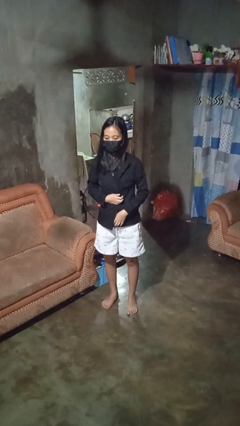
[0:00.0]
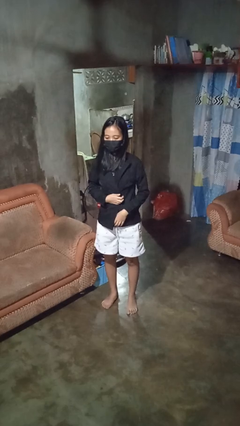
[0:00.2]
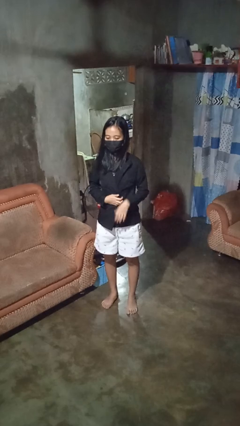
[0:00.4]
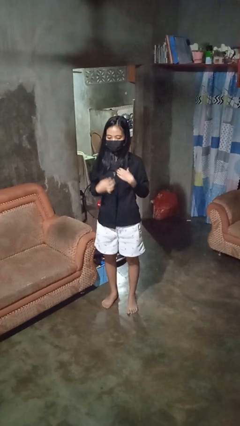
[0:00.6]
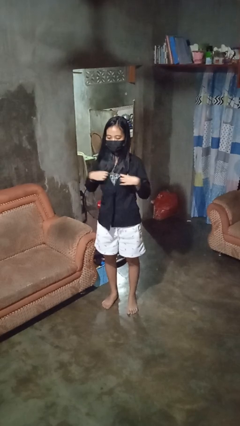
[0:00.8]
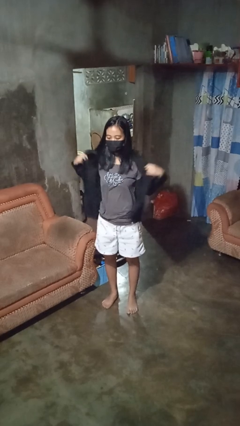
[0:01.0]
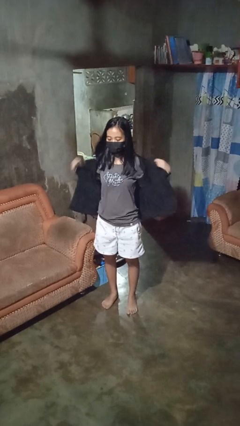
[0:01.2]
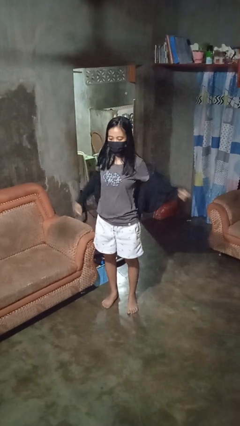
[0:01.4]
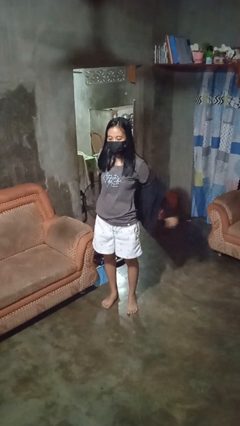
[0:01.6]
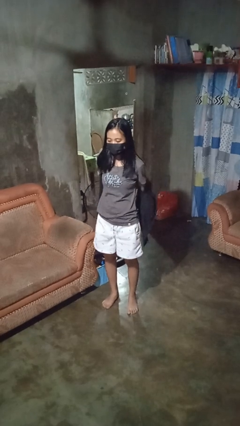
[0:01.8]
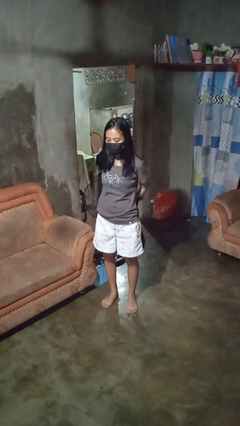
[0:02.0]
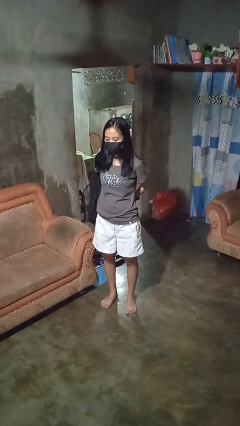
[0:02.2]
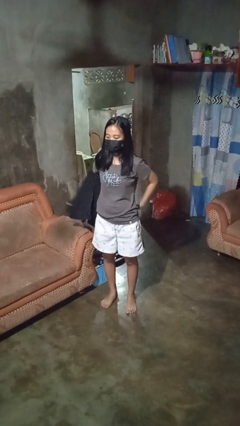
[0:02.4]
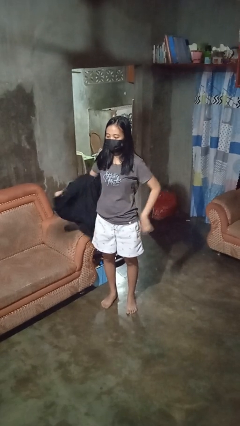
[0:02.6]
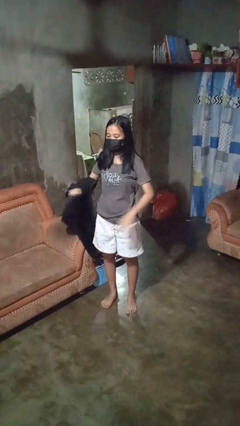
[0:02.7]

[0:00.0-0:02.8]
person takes off shirt

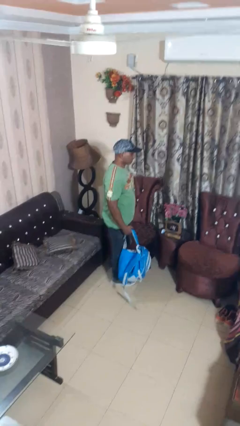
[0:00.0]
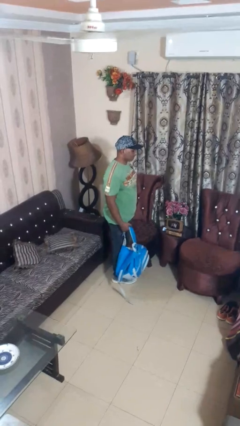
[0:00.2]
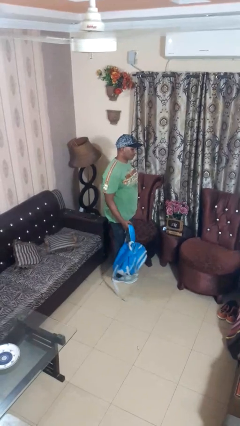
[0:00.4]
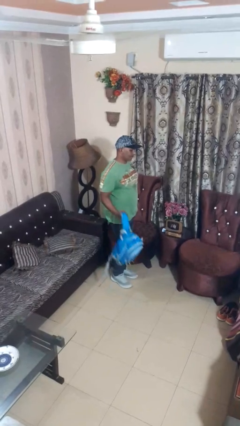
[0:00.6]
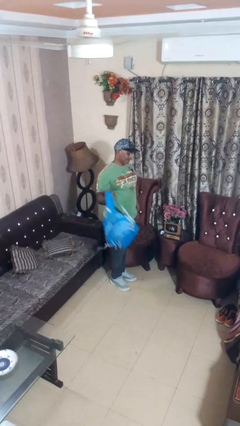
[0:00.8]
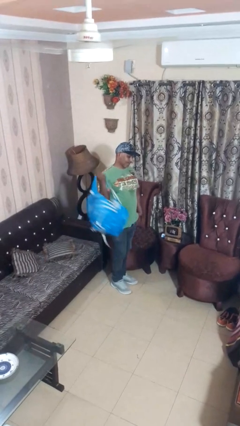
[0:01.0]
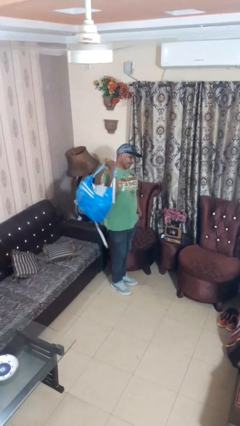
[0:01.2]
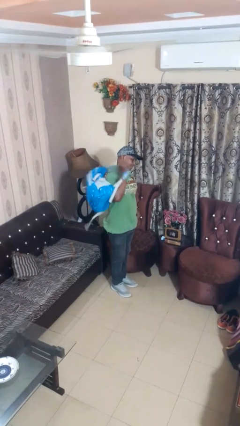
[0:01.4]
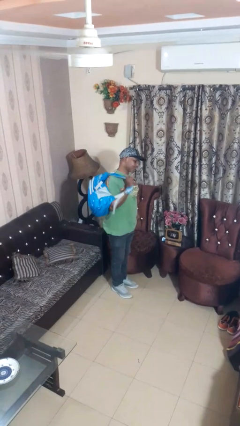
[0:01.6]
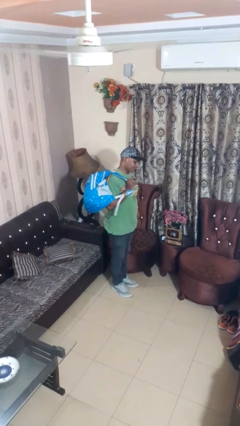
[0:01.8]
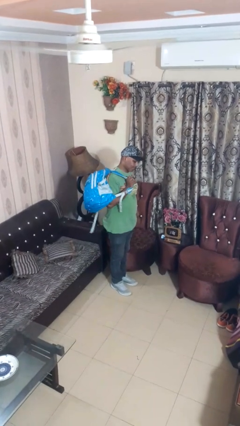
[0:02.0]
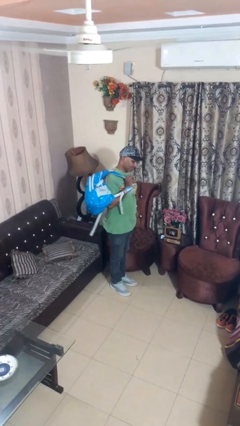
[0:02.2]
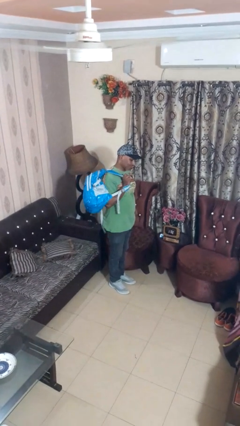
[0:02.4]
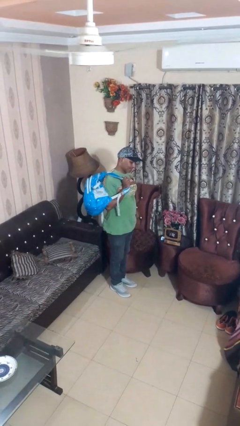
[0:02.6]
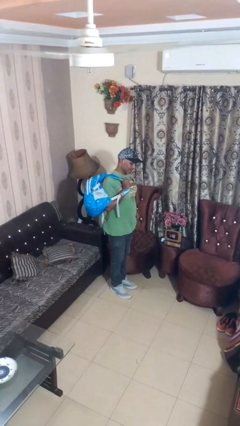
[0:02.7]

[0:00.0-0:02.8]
person puts on backpack

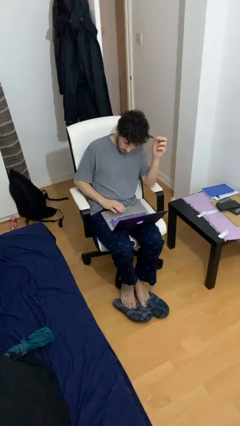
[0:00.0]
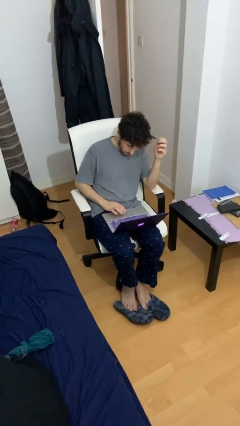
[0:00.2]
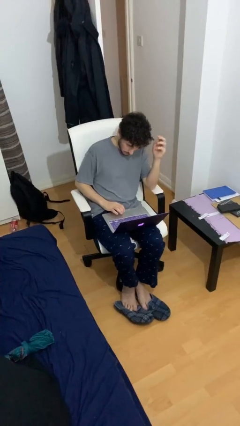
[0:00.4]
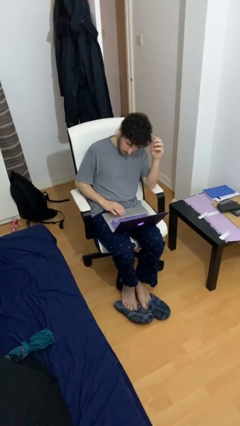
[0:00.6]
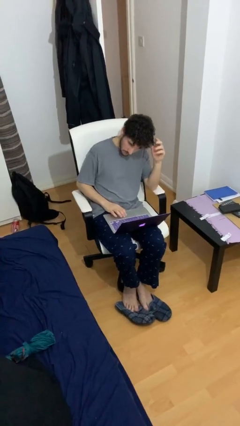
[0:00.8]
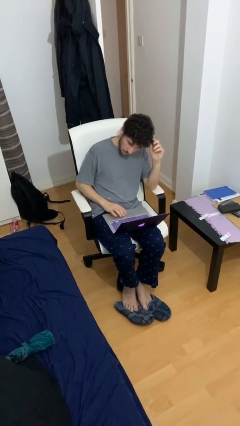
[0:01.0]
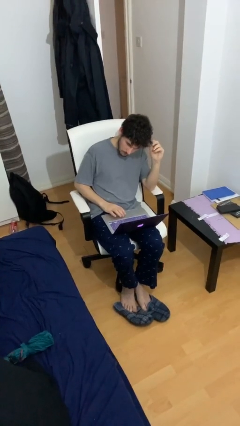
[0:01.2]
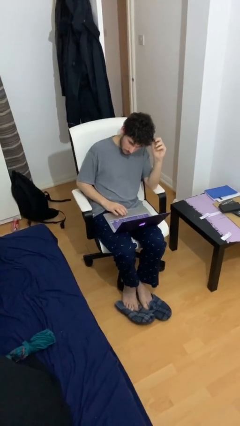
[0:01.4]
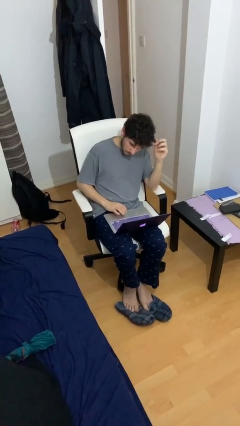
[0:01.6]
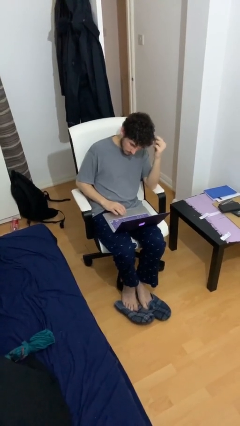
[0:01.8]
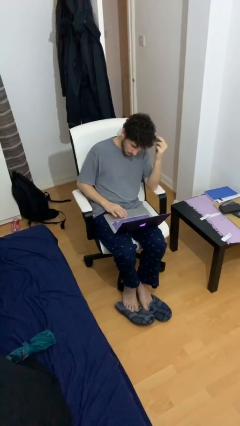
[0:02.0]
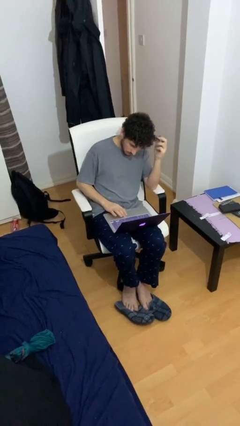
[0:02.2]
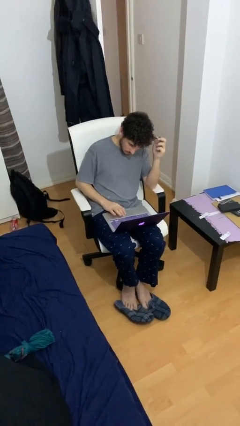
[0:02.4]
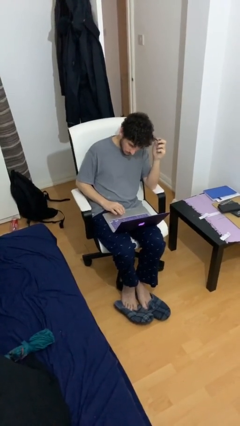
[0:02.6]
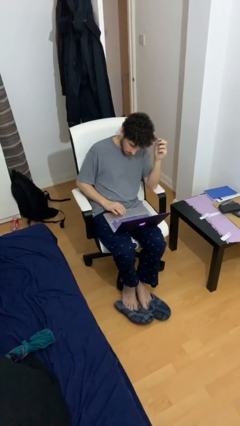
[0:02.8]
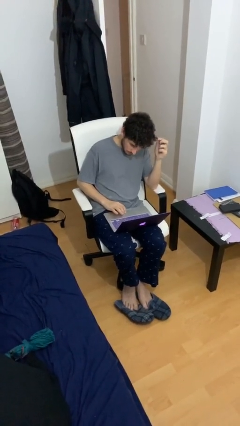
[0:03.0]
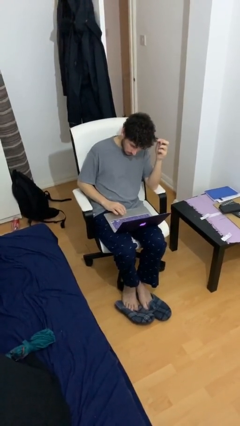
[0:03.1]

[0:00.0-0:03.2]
person interacts with laptop

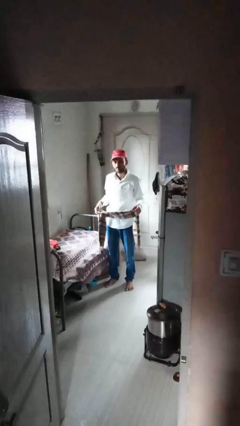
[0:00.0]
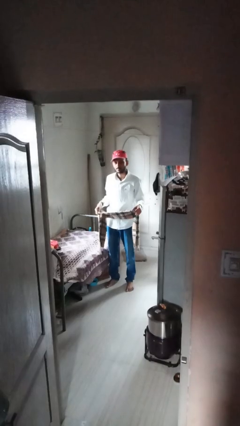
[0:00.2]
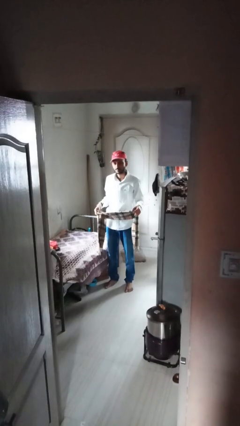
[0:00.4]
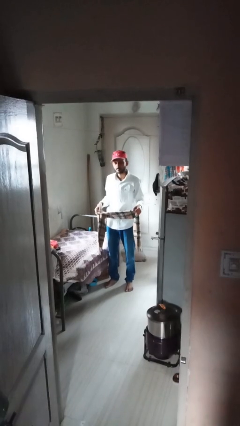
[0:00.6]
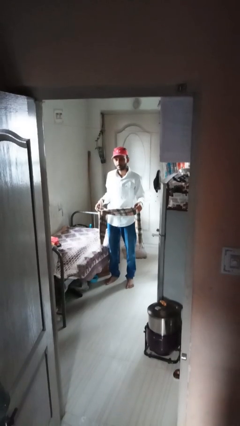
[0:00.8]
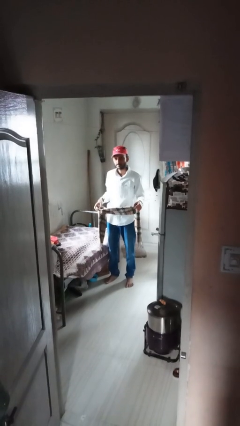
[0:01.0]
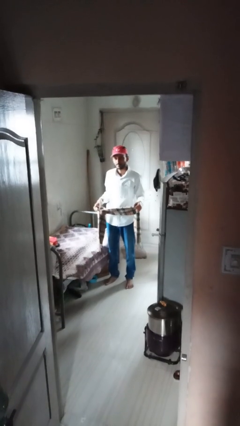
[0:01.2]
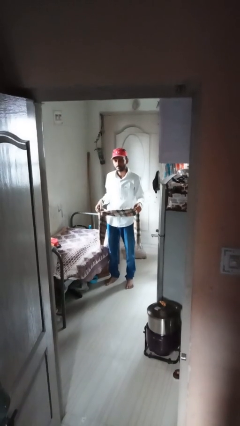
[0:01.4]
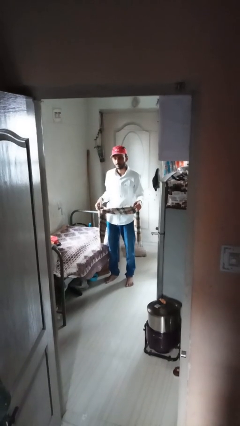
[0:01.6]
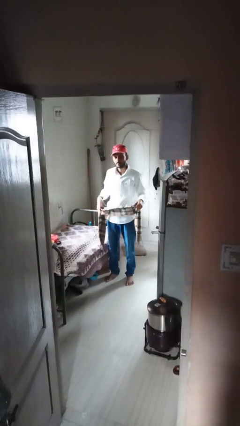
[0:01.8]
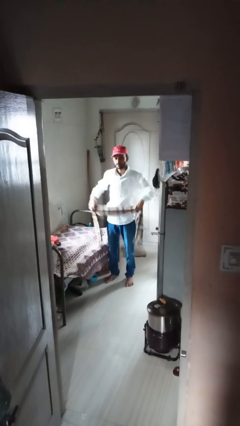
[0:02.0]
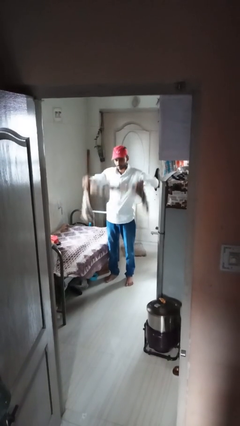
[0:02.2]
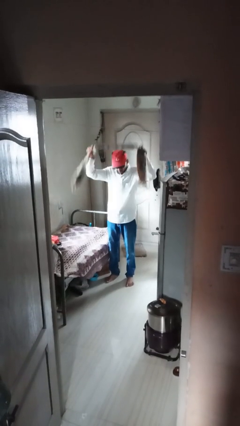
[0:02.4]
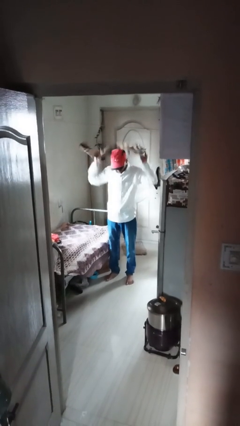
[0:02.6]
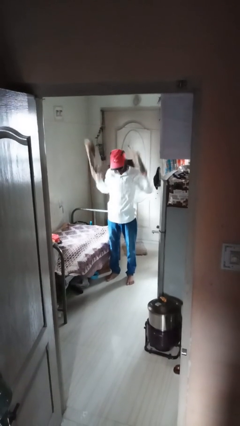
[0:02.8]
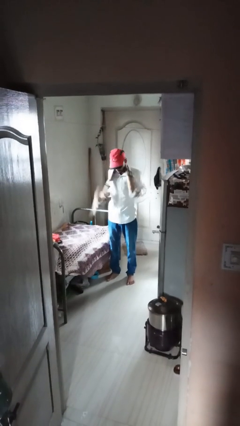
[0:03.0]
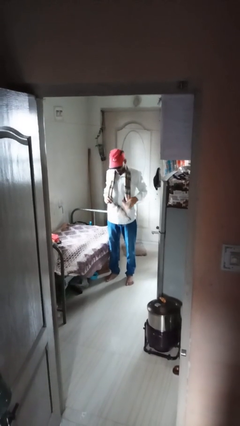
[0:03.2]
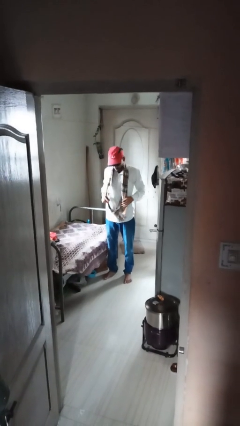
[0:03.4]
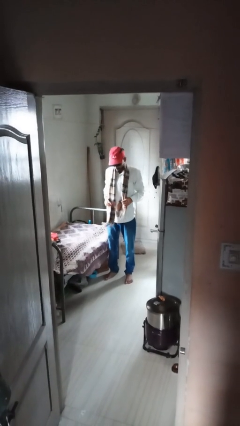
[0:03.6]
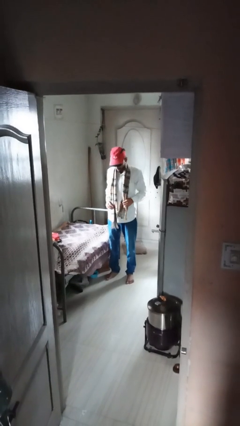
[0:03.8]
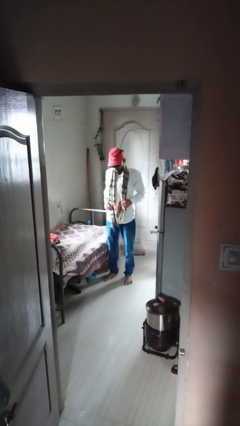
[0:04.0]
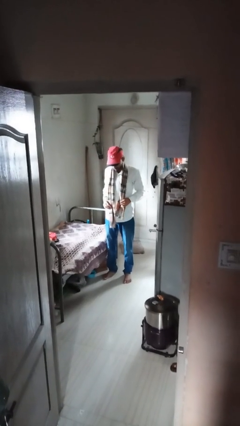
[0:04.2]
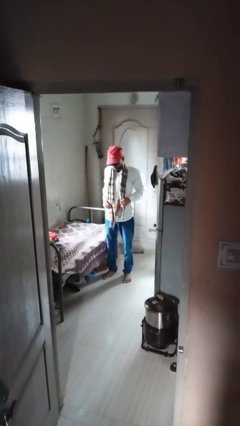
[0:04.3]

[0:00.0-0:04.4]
person puts on scarf

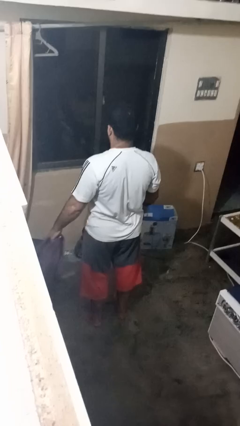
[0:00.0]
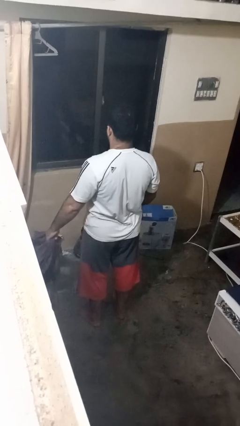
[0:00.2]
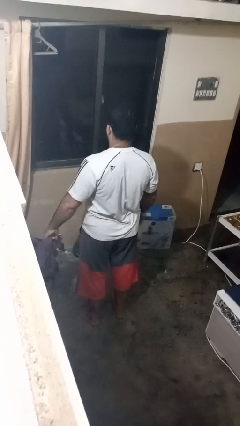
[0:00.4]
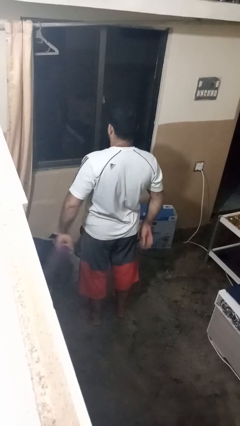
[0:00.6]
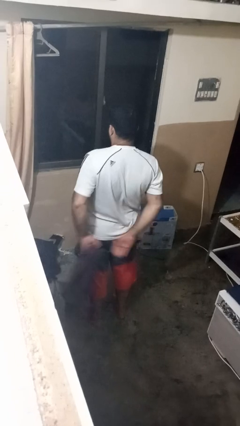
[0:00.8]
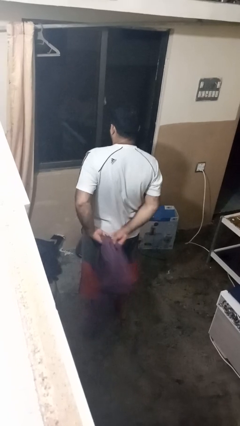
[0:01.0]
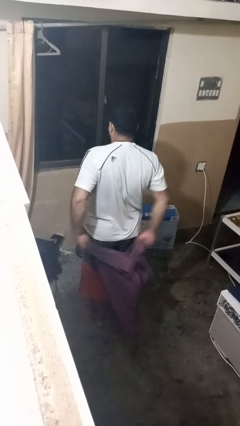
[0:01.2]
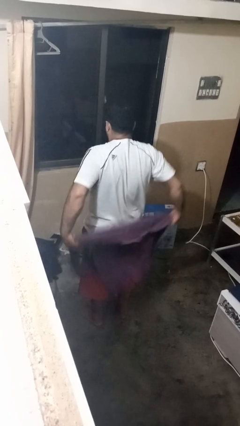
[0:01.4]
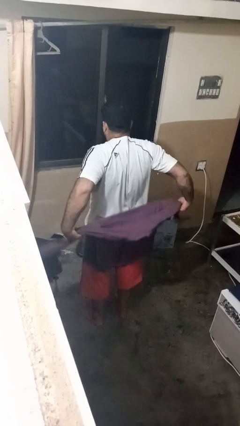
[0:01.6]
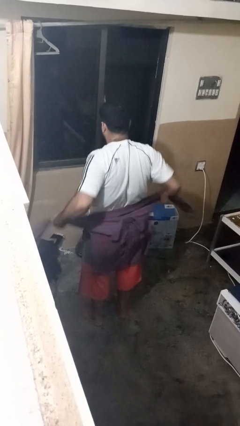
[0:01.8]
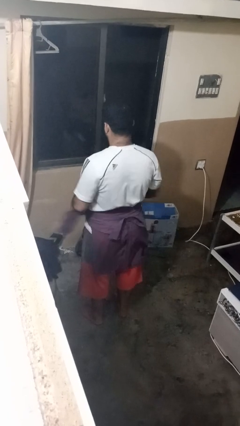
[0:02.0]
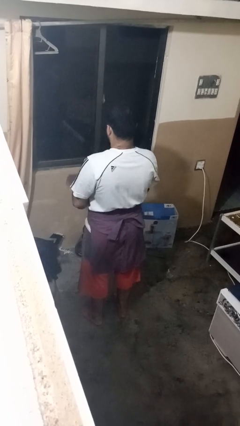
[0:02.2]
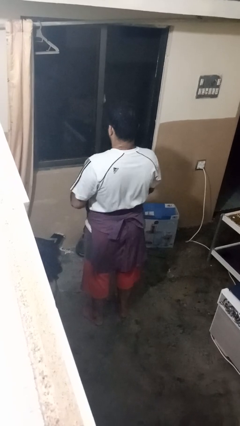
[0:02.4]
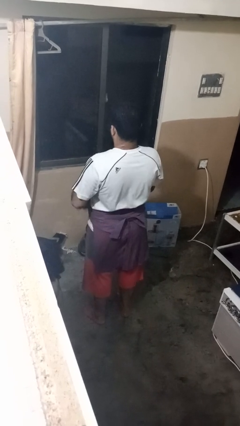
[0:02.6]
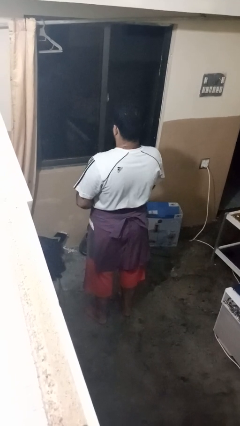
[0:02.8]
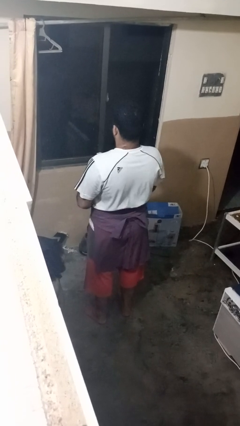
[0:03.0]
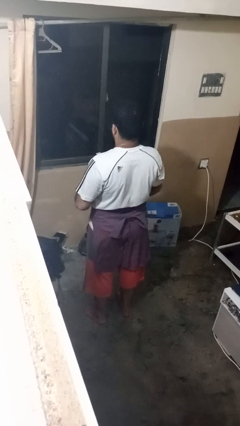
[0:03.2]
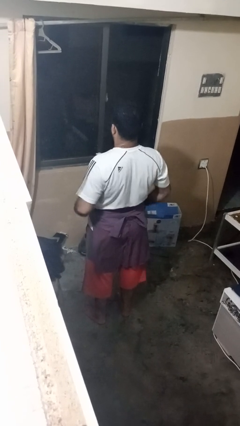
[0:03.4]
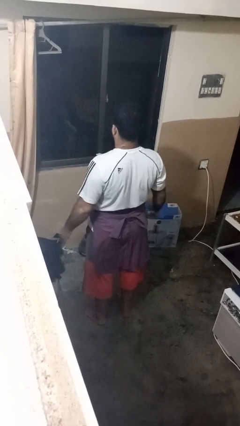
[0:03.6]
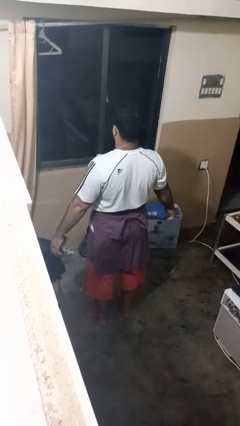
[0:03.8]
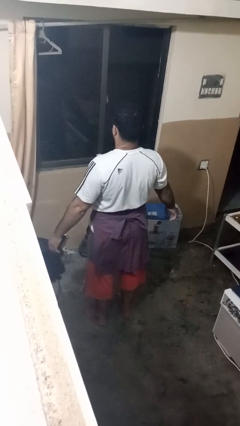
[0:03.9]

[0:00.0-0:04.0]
person ties jacket around waist

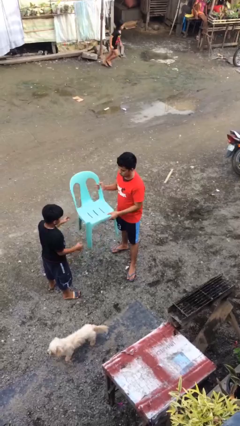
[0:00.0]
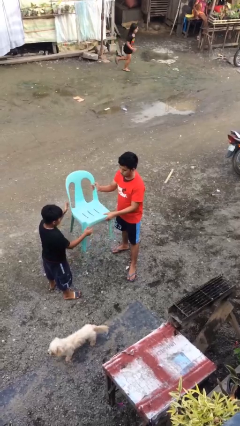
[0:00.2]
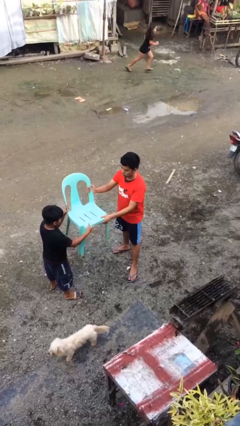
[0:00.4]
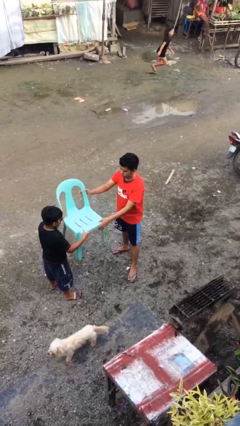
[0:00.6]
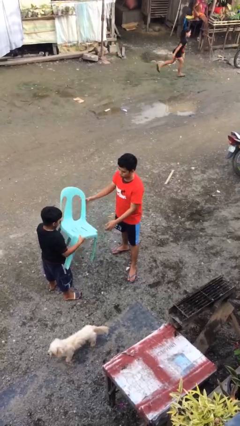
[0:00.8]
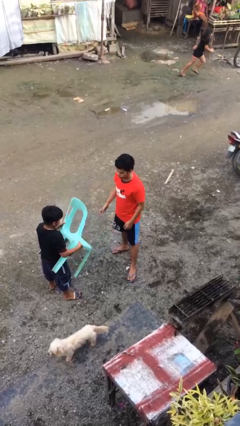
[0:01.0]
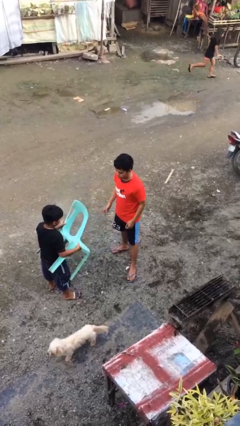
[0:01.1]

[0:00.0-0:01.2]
person transfers object to person
